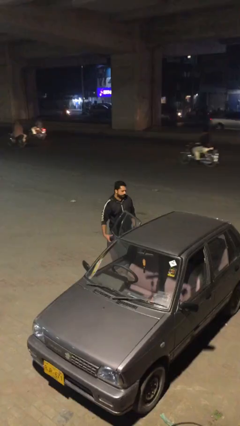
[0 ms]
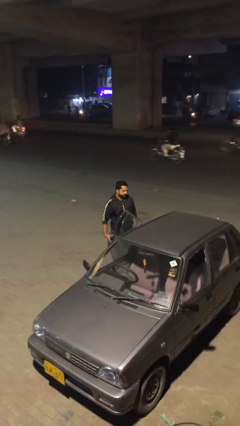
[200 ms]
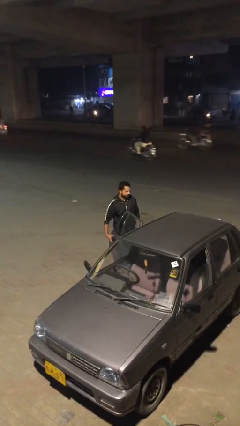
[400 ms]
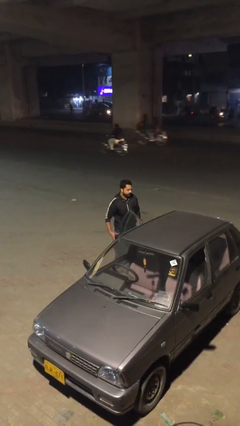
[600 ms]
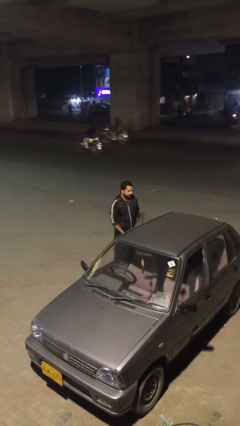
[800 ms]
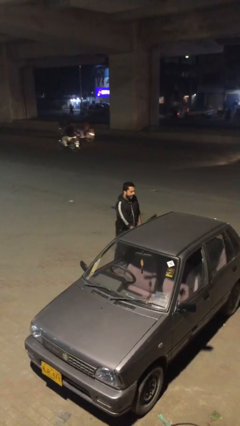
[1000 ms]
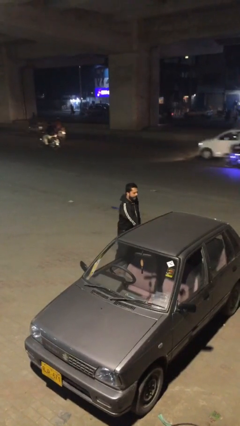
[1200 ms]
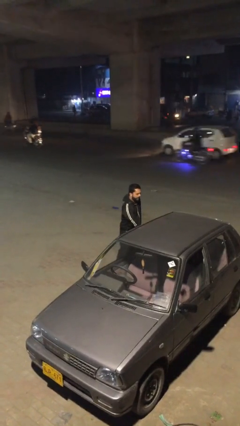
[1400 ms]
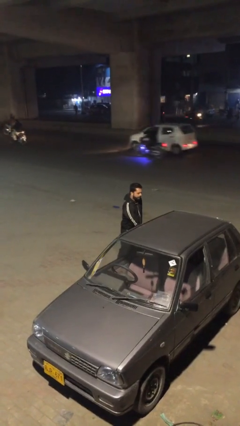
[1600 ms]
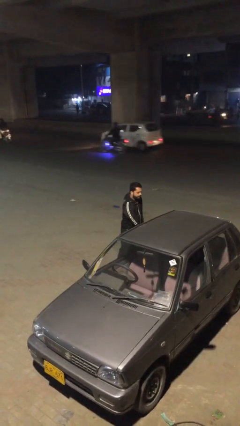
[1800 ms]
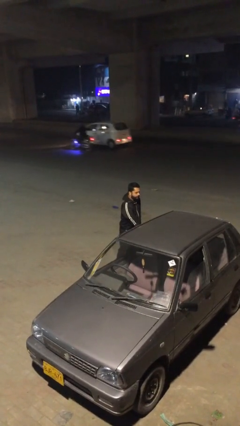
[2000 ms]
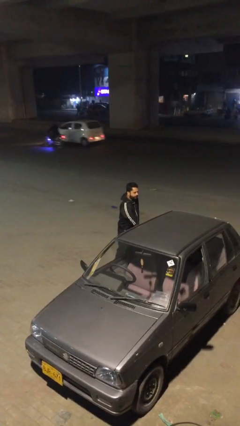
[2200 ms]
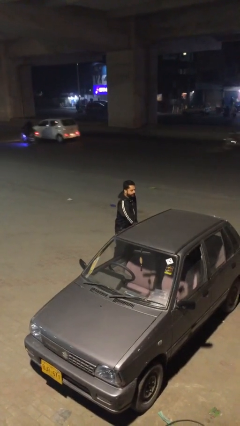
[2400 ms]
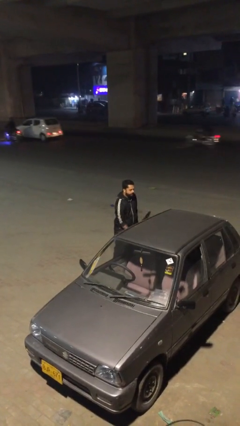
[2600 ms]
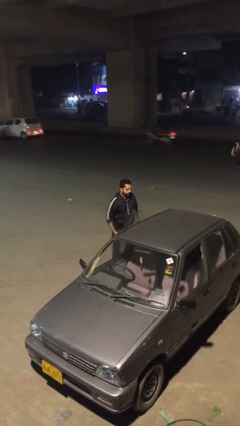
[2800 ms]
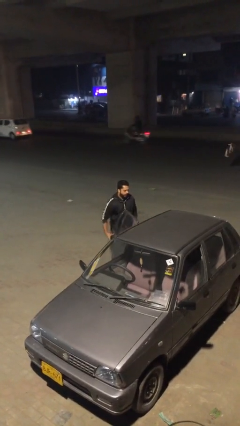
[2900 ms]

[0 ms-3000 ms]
person closes car door

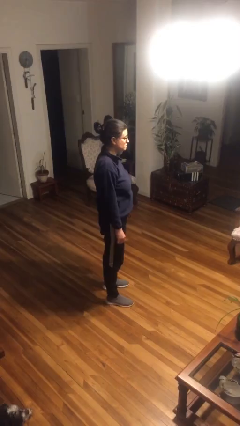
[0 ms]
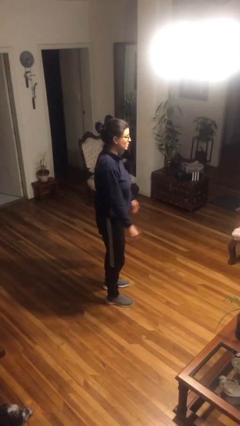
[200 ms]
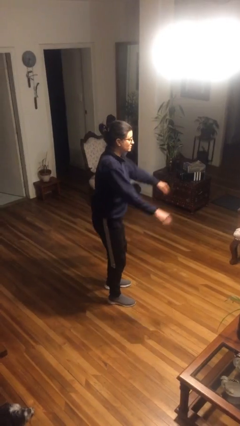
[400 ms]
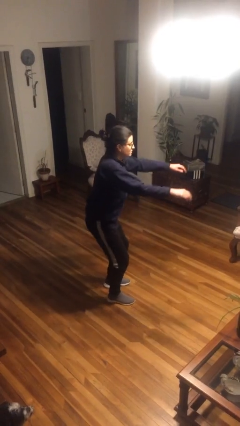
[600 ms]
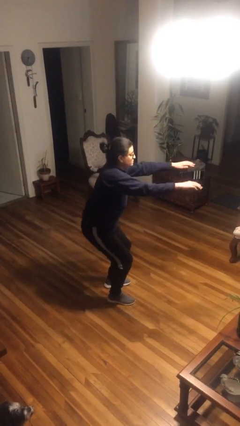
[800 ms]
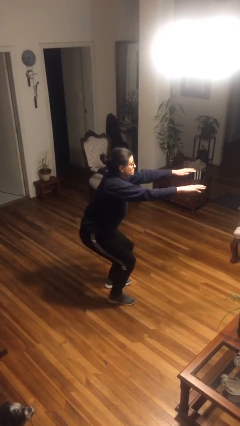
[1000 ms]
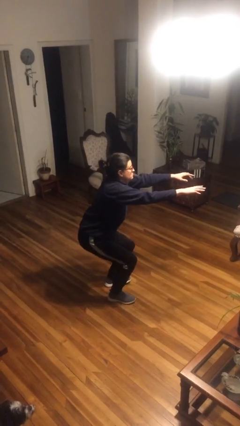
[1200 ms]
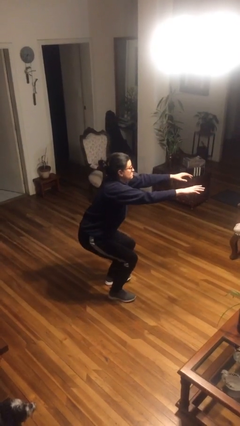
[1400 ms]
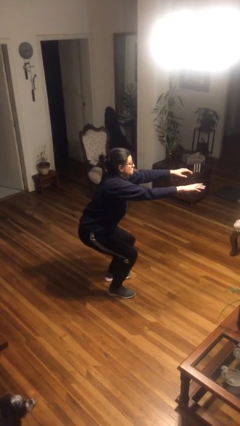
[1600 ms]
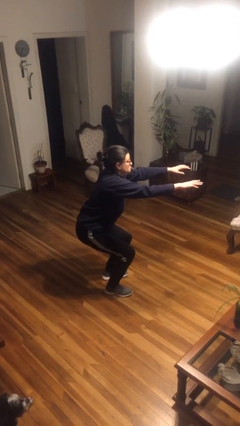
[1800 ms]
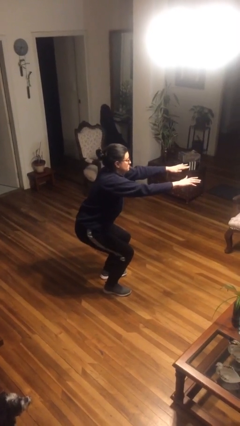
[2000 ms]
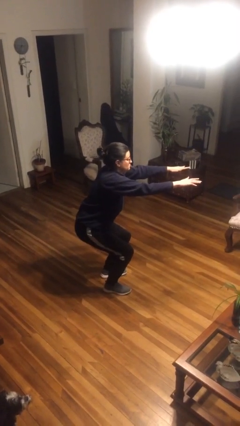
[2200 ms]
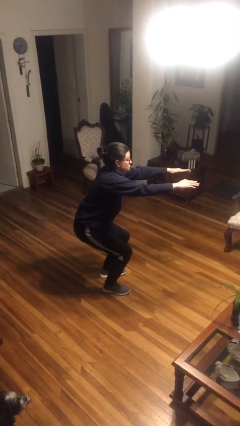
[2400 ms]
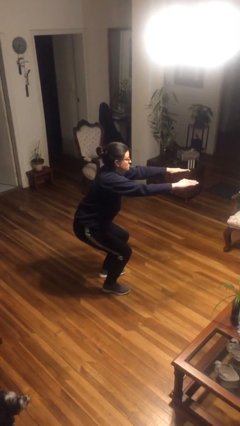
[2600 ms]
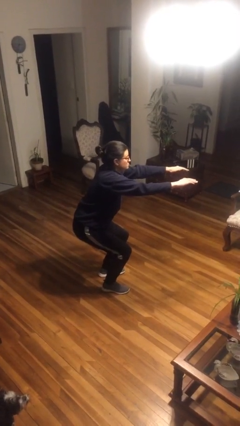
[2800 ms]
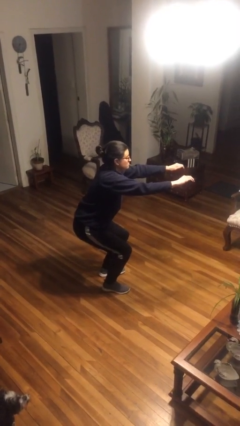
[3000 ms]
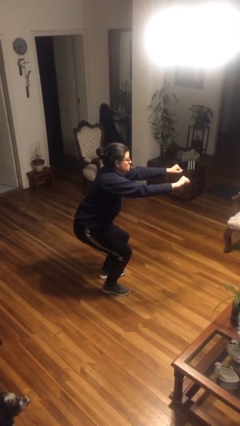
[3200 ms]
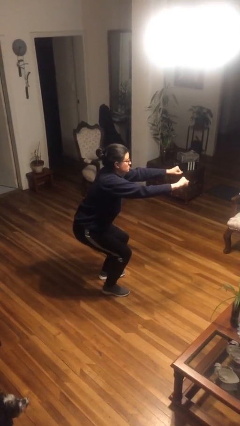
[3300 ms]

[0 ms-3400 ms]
person squats

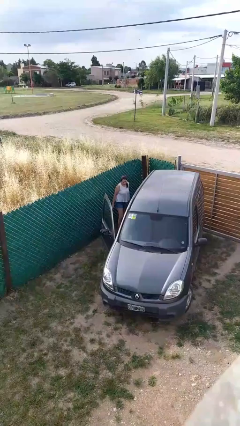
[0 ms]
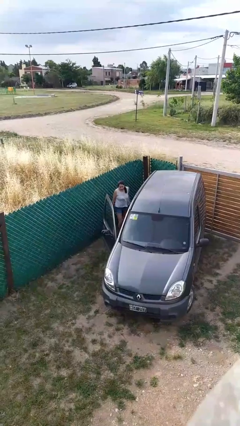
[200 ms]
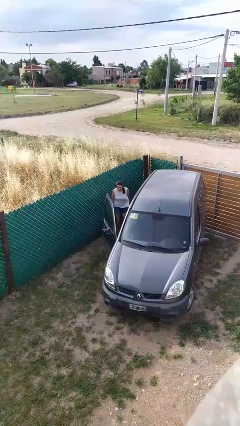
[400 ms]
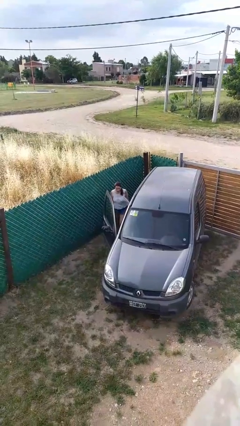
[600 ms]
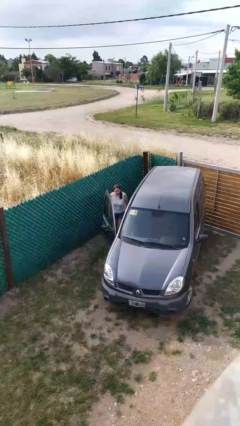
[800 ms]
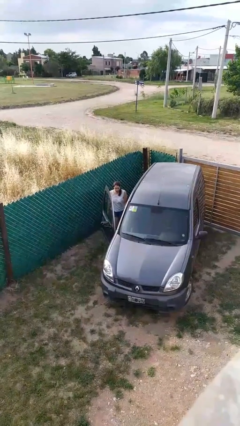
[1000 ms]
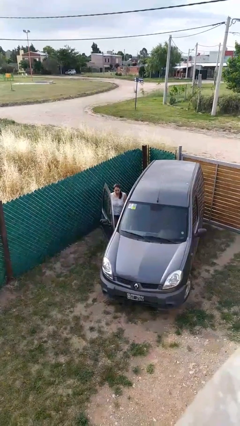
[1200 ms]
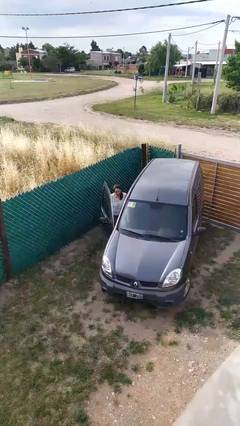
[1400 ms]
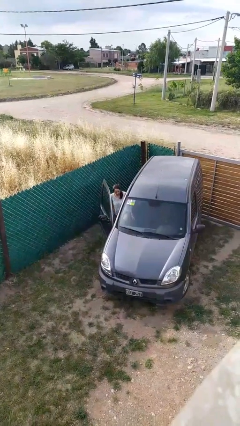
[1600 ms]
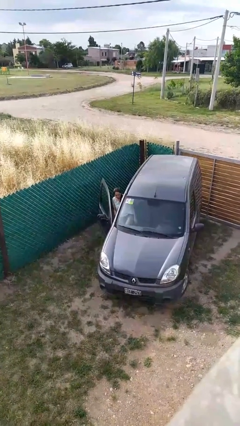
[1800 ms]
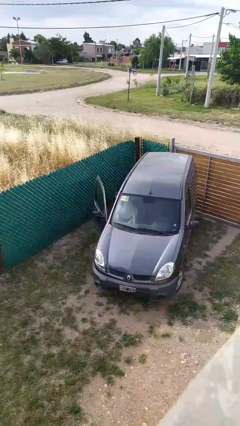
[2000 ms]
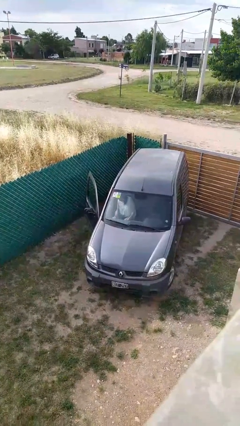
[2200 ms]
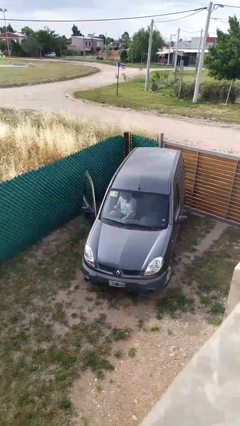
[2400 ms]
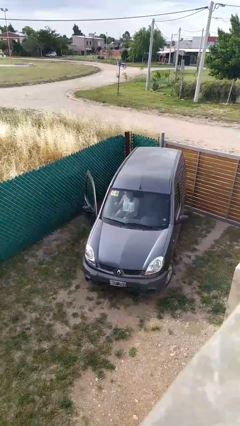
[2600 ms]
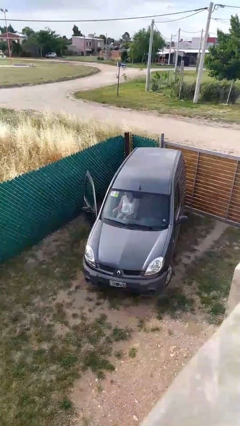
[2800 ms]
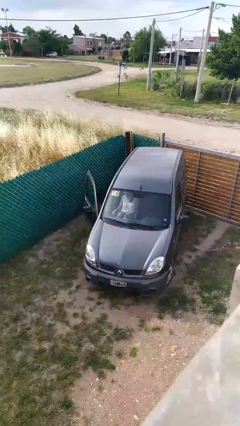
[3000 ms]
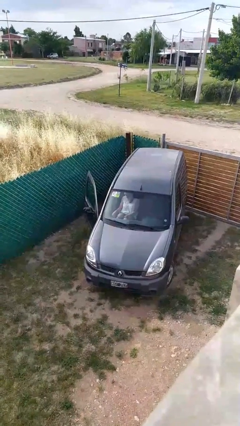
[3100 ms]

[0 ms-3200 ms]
person enters car

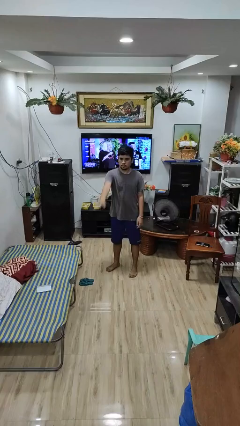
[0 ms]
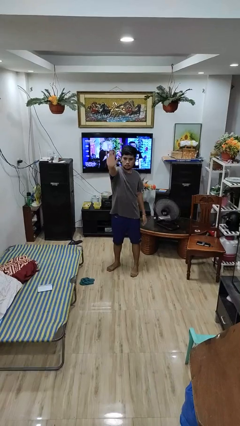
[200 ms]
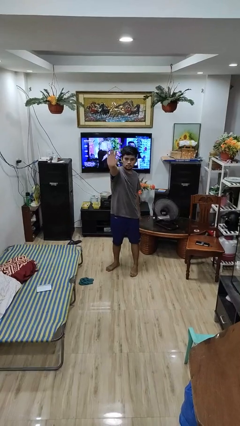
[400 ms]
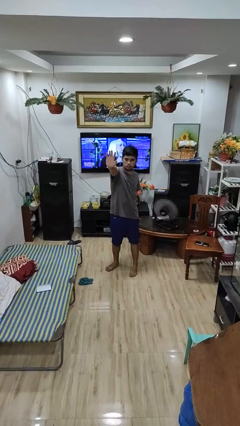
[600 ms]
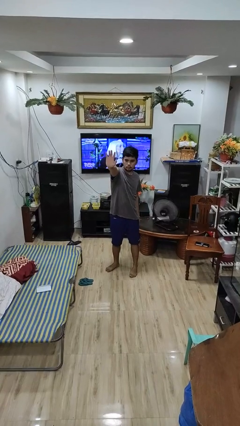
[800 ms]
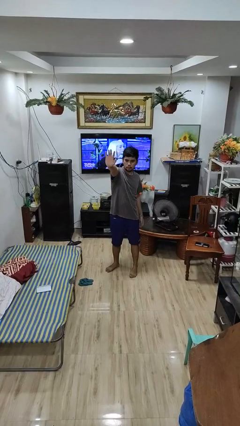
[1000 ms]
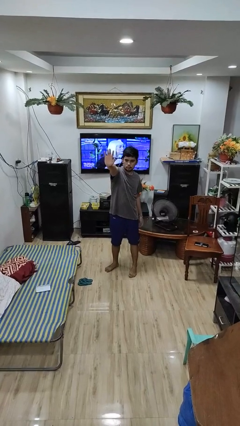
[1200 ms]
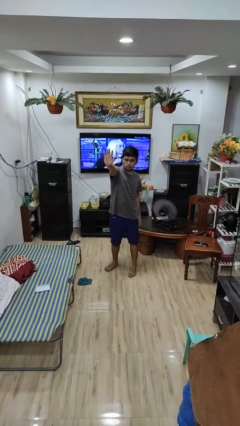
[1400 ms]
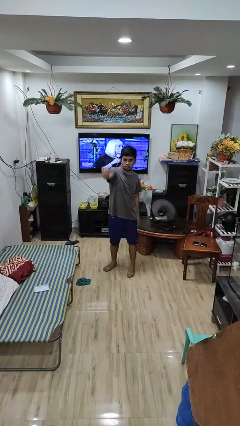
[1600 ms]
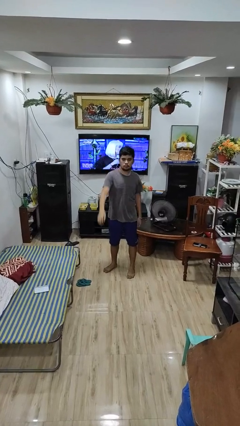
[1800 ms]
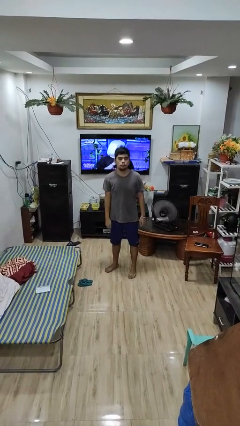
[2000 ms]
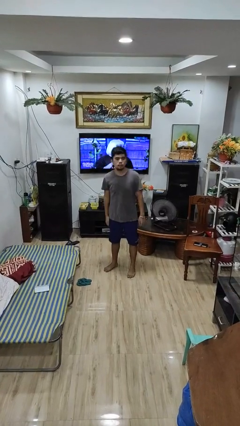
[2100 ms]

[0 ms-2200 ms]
person gestures stop

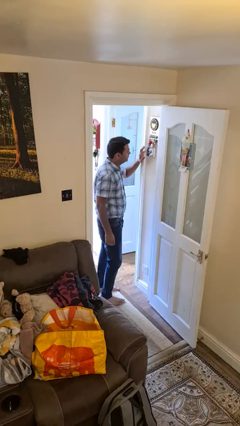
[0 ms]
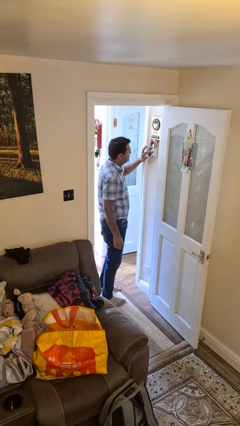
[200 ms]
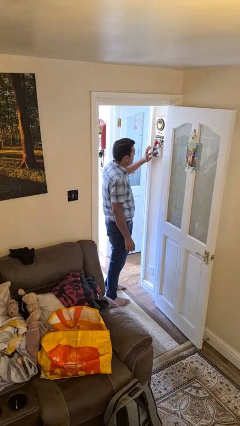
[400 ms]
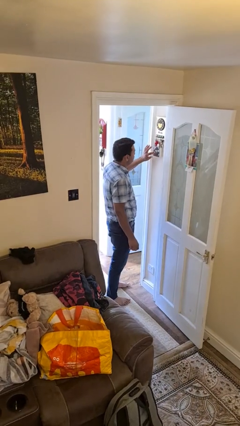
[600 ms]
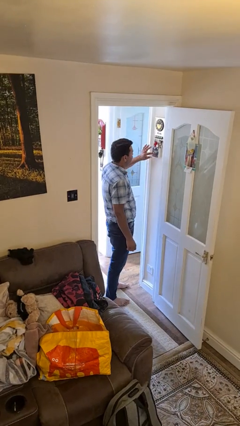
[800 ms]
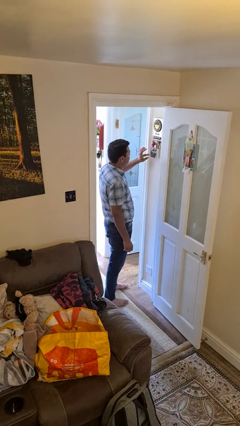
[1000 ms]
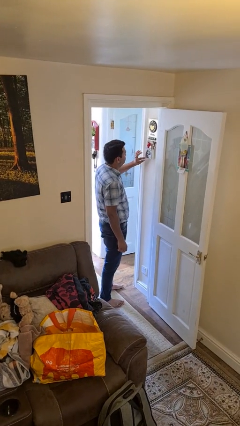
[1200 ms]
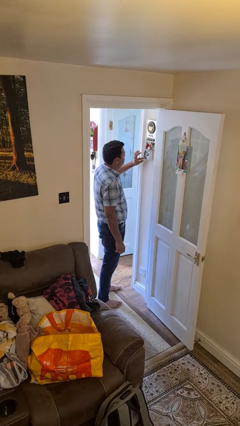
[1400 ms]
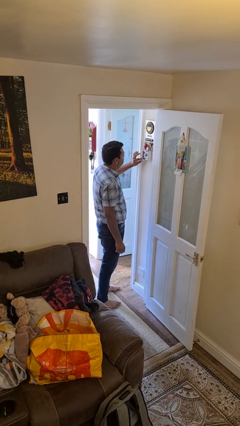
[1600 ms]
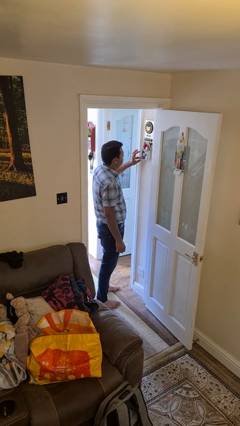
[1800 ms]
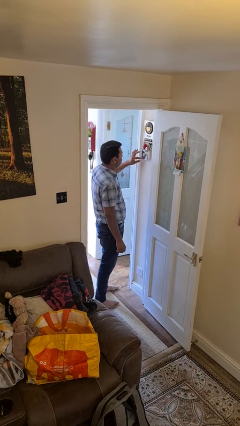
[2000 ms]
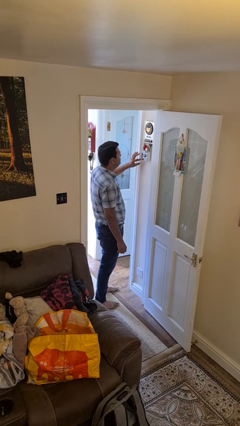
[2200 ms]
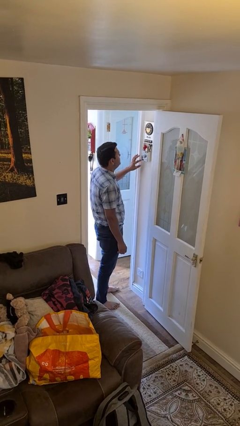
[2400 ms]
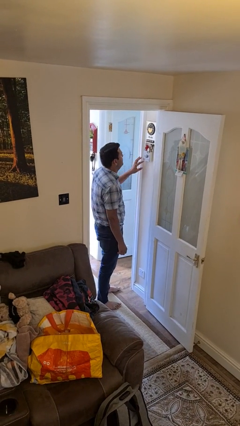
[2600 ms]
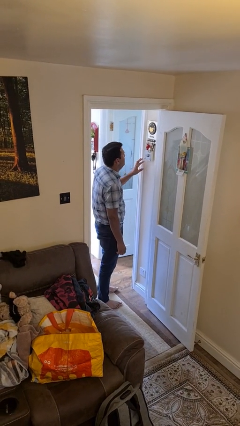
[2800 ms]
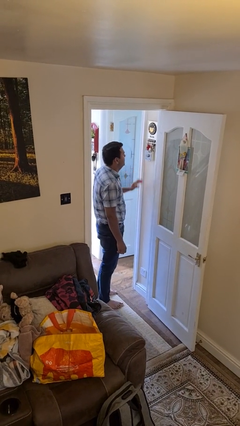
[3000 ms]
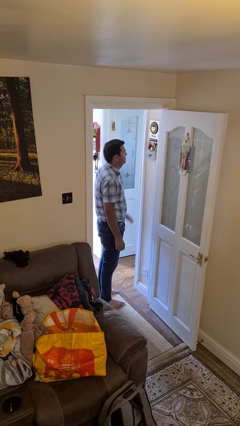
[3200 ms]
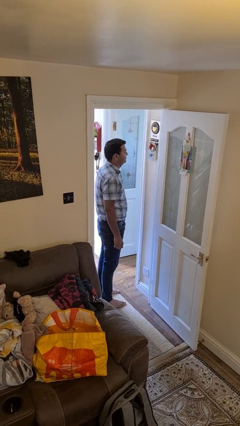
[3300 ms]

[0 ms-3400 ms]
person adjusts thermostat

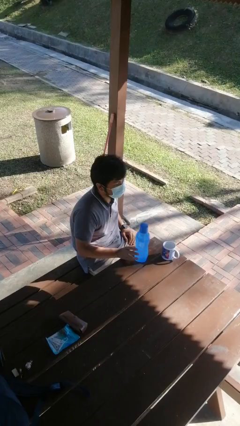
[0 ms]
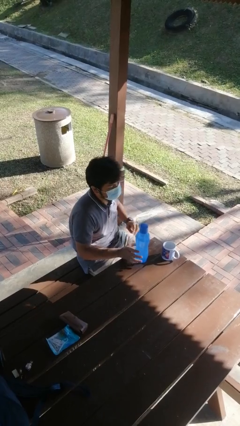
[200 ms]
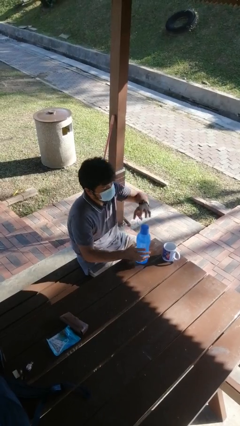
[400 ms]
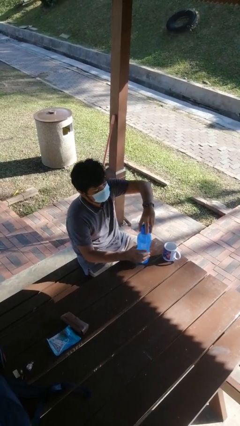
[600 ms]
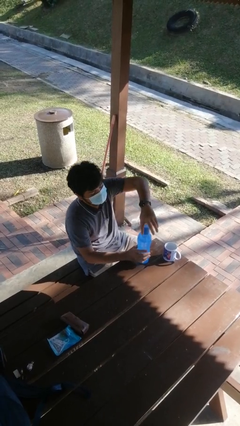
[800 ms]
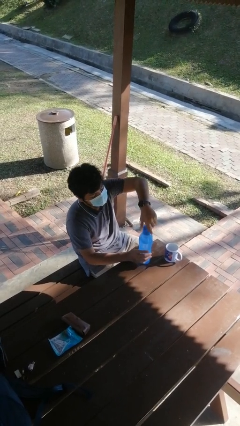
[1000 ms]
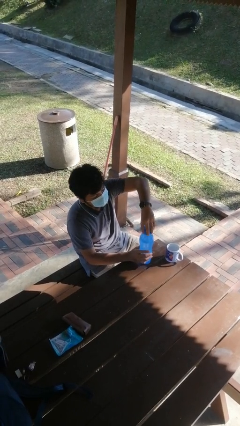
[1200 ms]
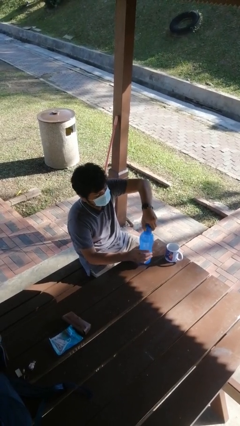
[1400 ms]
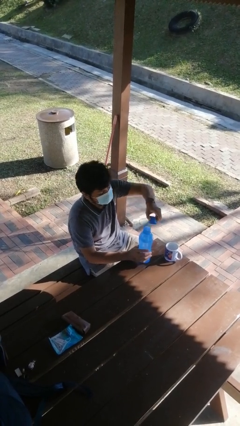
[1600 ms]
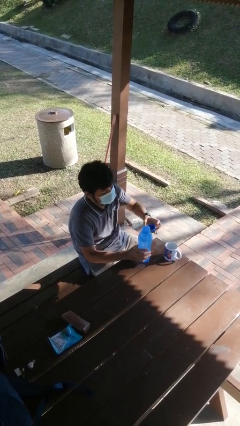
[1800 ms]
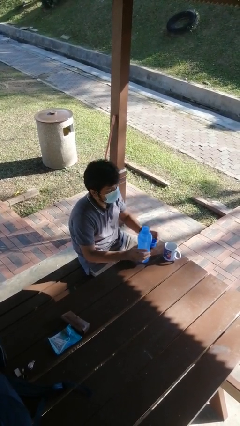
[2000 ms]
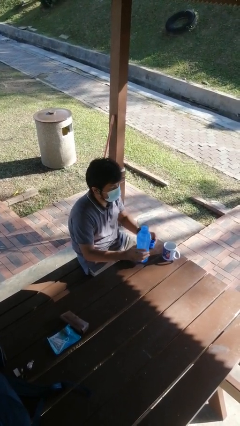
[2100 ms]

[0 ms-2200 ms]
person unscrews lid from bottle
